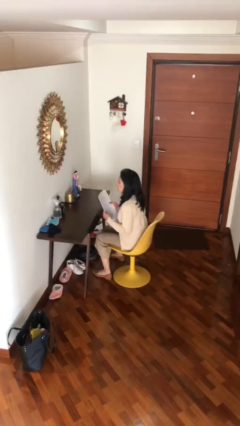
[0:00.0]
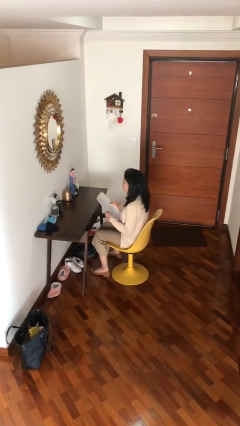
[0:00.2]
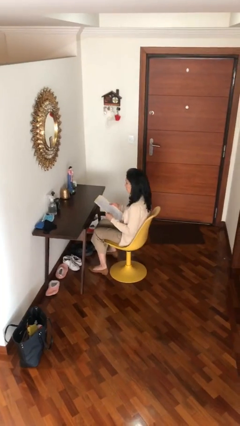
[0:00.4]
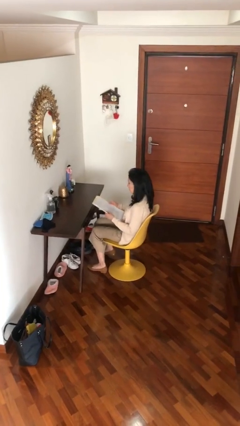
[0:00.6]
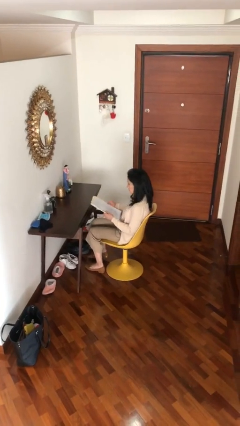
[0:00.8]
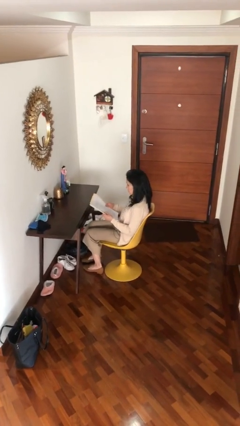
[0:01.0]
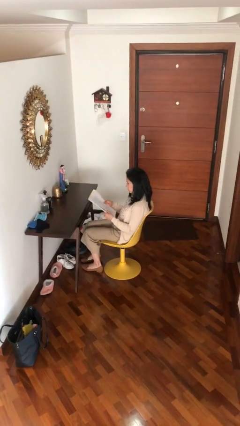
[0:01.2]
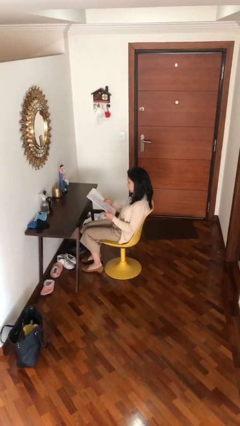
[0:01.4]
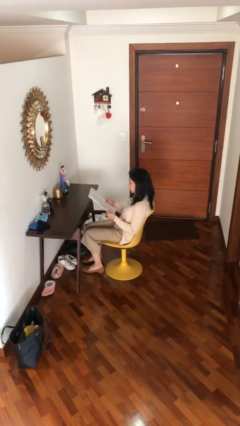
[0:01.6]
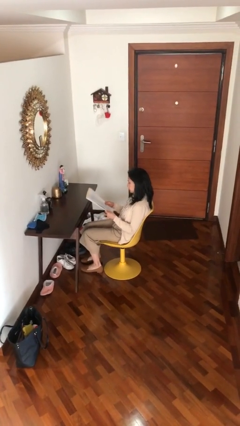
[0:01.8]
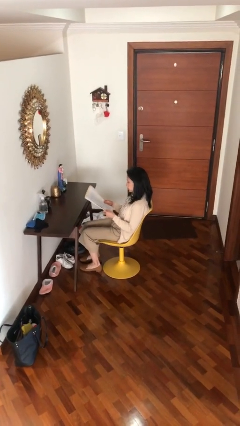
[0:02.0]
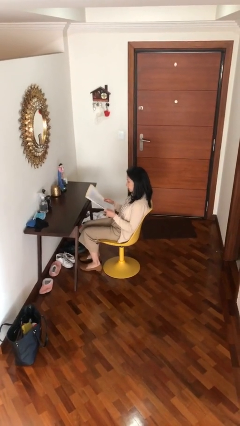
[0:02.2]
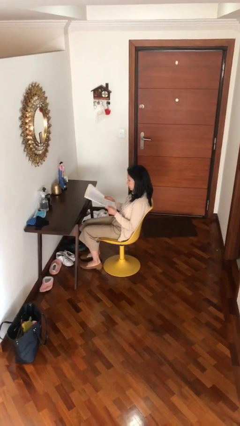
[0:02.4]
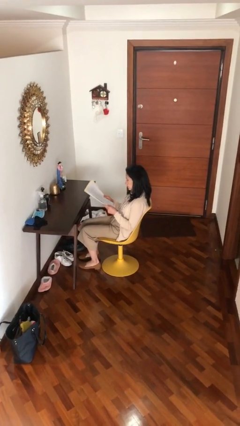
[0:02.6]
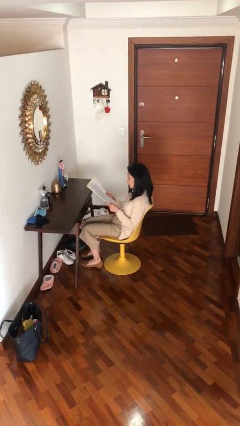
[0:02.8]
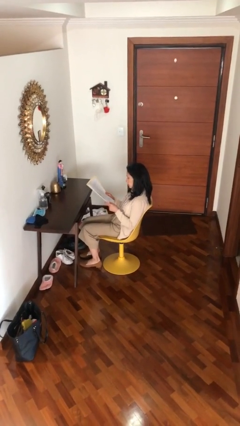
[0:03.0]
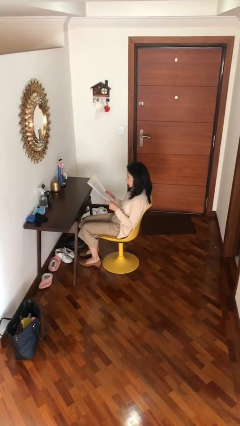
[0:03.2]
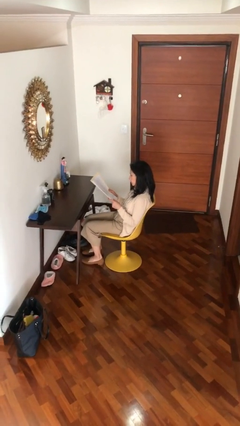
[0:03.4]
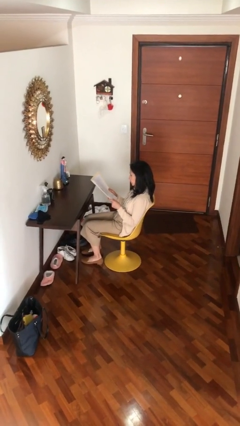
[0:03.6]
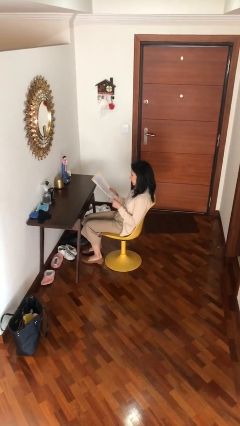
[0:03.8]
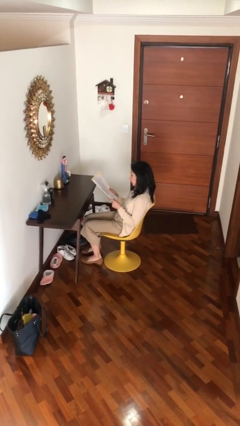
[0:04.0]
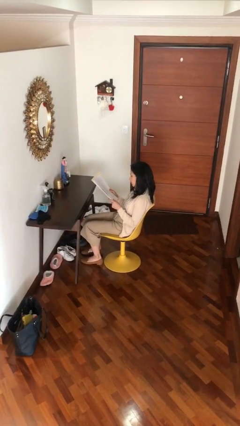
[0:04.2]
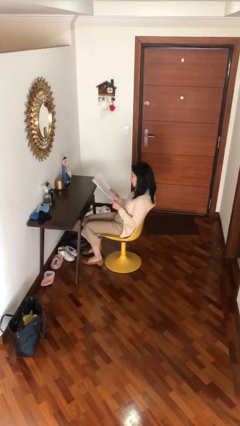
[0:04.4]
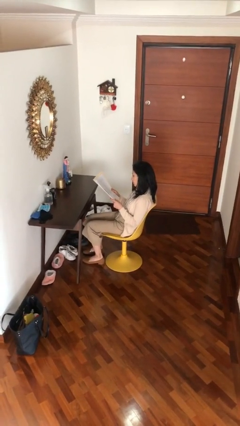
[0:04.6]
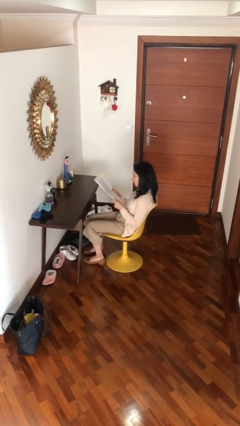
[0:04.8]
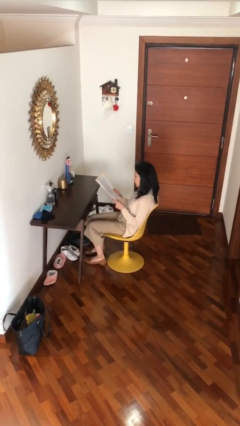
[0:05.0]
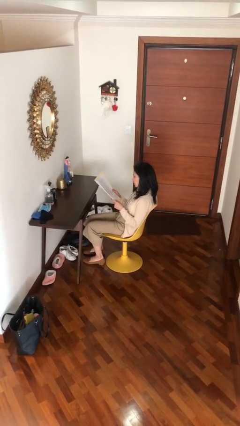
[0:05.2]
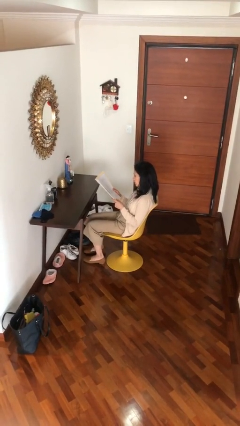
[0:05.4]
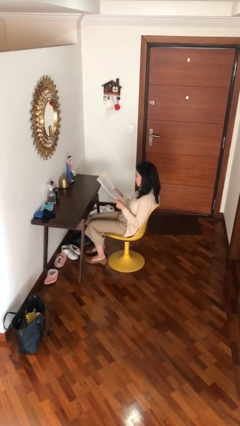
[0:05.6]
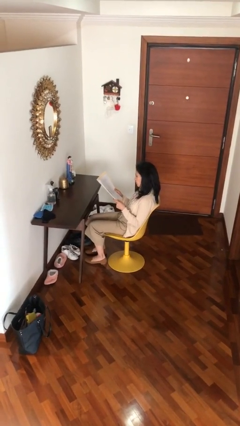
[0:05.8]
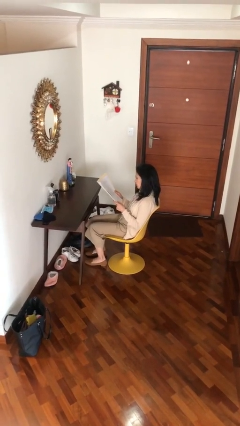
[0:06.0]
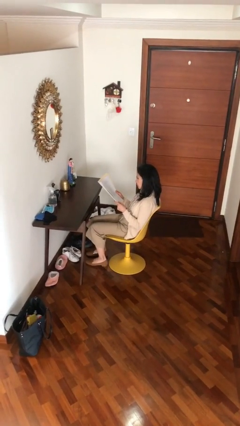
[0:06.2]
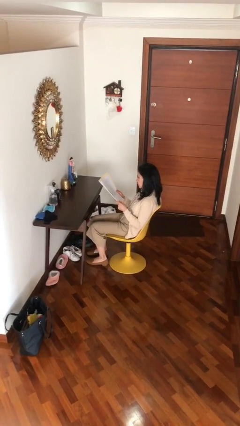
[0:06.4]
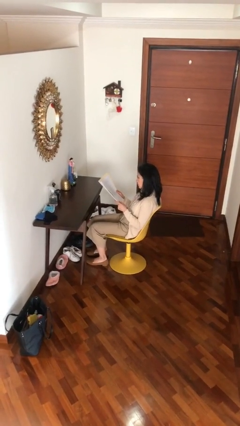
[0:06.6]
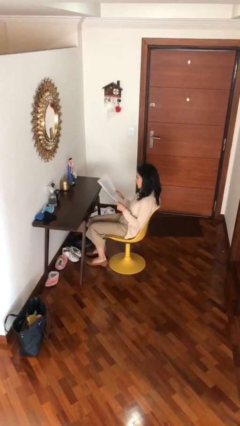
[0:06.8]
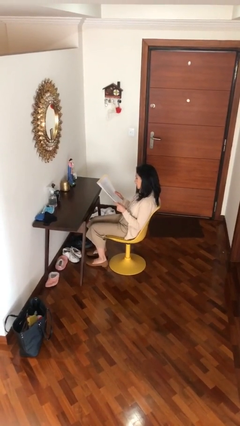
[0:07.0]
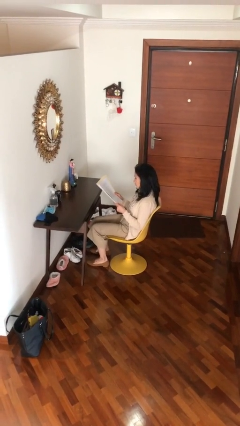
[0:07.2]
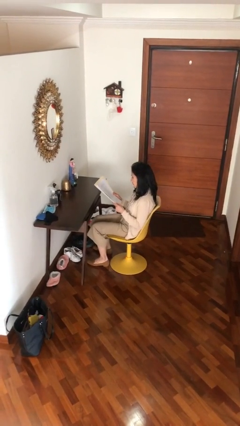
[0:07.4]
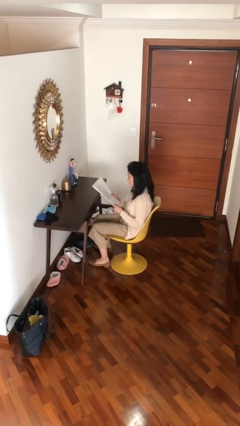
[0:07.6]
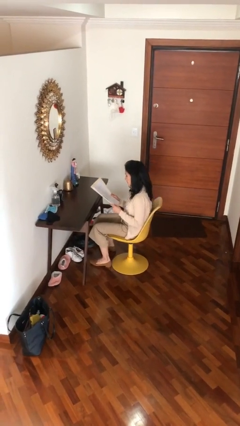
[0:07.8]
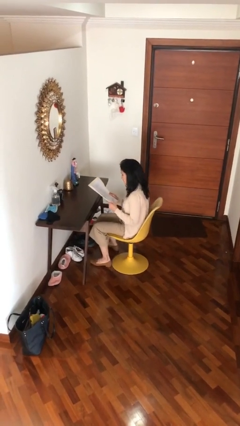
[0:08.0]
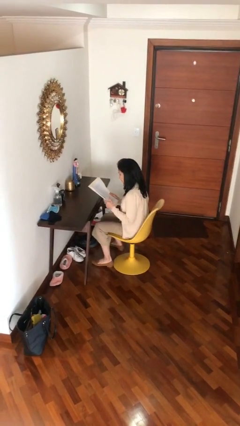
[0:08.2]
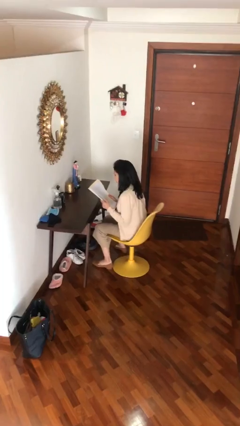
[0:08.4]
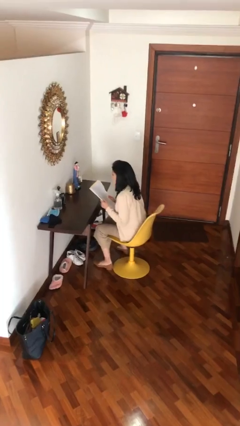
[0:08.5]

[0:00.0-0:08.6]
person reads document

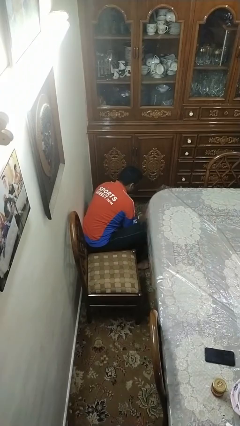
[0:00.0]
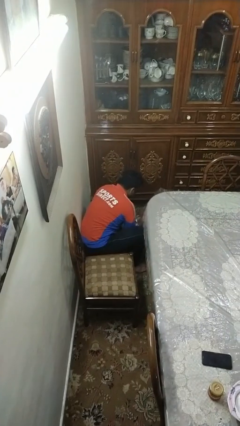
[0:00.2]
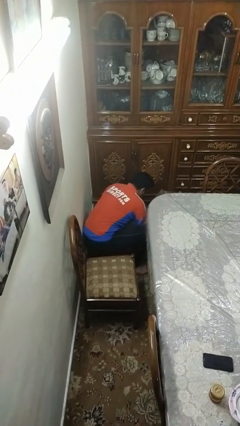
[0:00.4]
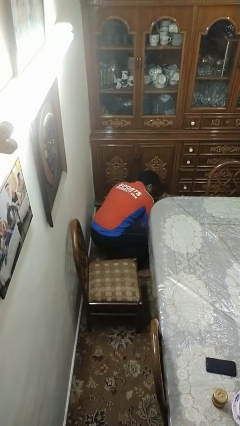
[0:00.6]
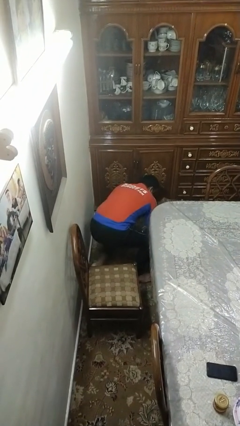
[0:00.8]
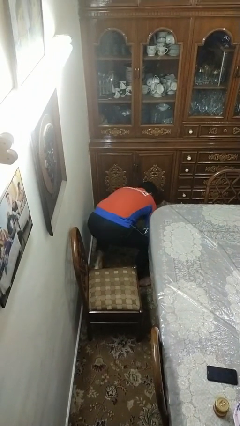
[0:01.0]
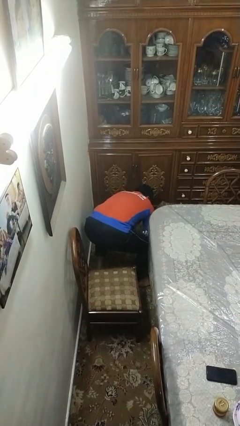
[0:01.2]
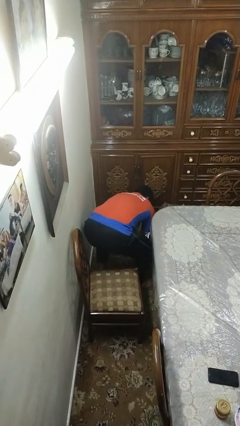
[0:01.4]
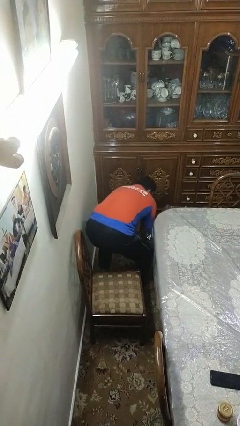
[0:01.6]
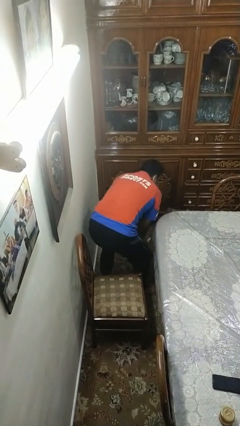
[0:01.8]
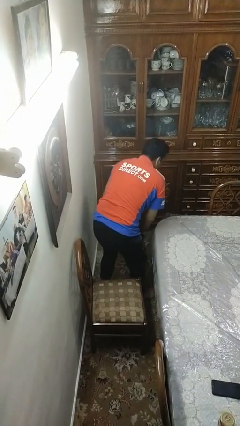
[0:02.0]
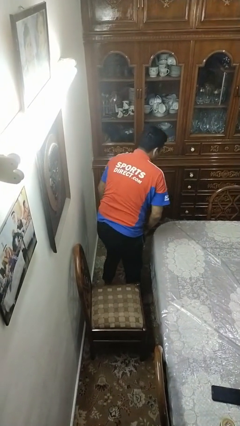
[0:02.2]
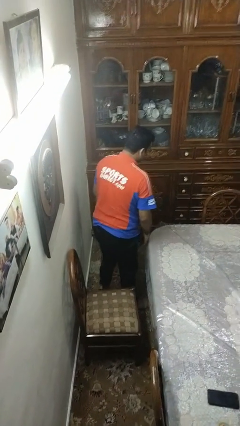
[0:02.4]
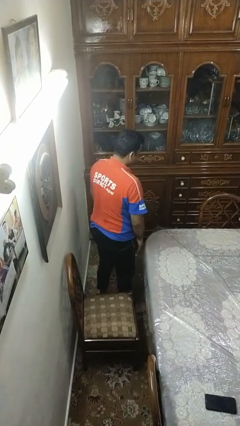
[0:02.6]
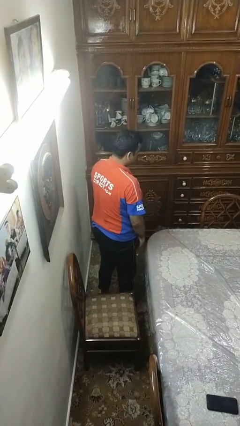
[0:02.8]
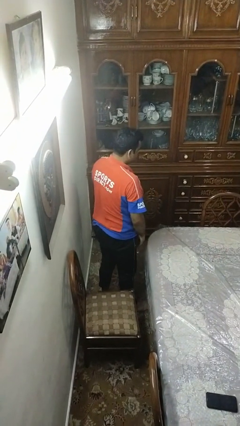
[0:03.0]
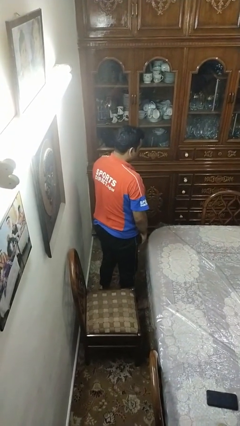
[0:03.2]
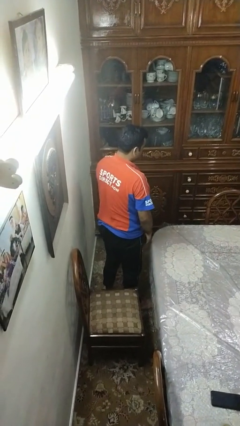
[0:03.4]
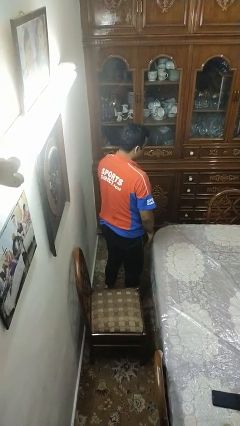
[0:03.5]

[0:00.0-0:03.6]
person stands up from floor

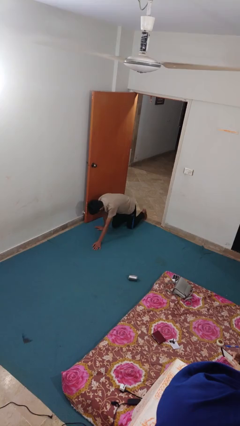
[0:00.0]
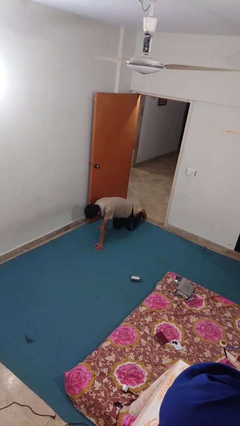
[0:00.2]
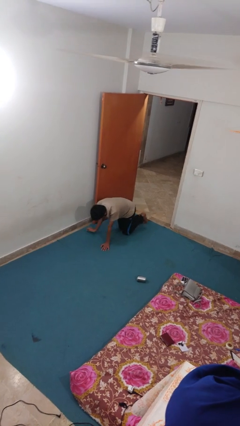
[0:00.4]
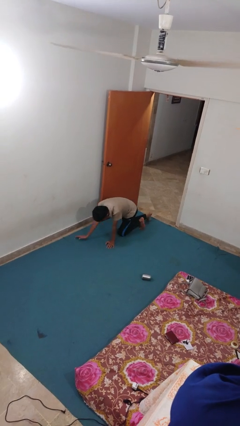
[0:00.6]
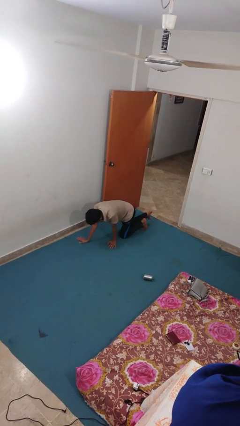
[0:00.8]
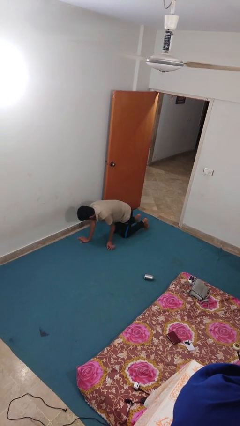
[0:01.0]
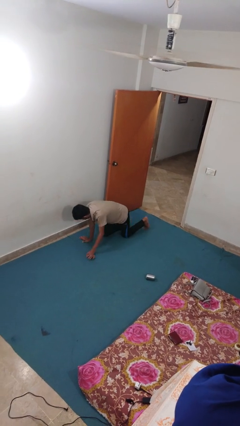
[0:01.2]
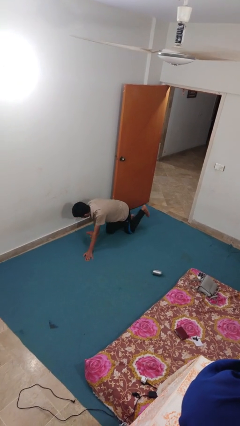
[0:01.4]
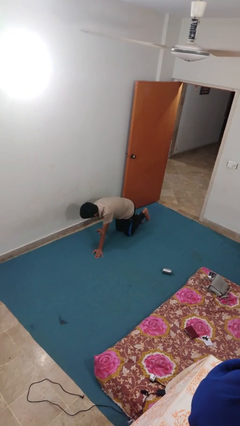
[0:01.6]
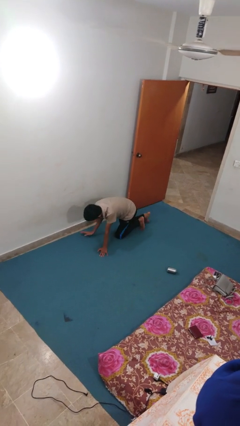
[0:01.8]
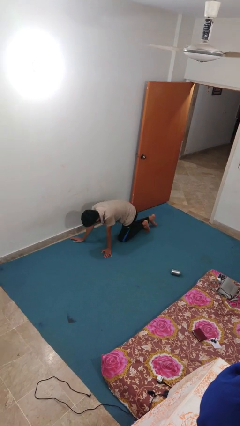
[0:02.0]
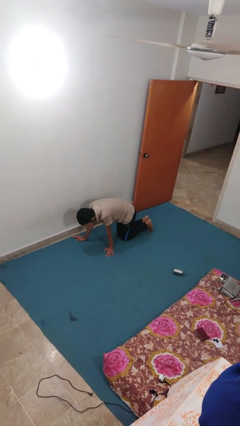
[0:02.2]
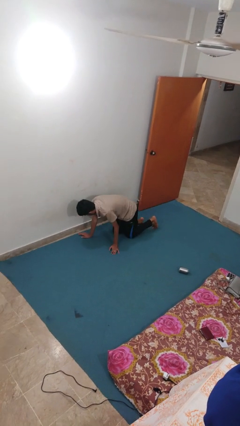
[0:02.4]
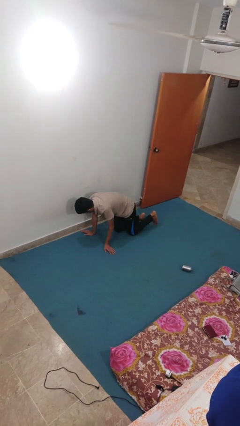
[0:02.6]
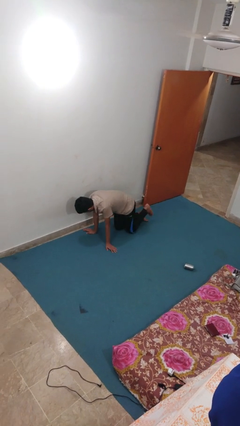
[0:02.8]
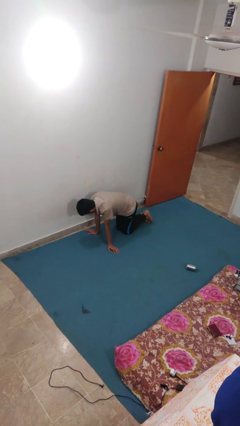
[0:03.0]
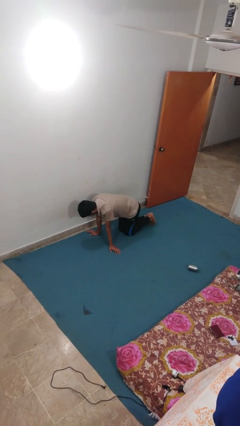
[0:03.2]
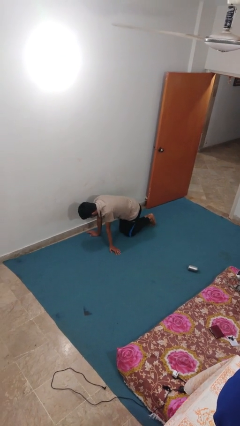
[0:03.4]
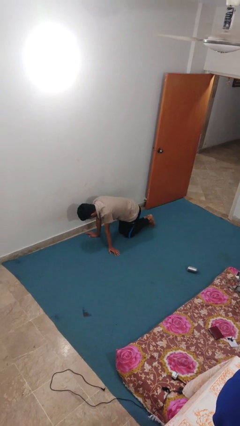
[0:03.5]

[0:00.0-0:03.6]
person crawls

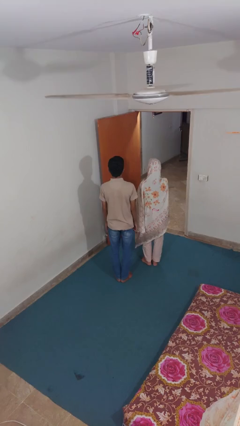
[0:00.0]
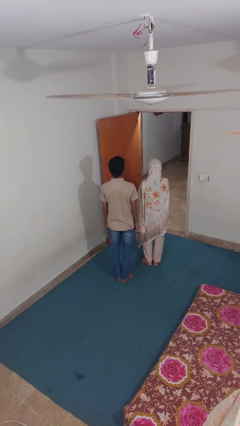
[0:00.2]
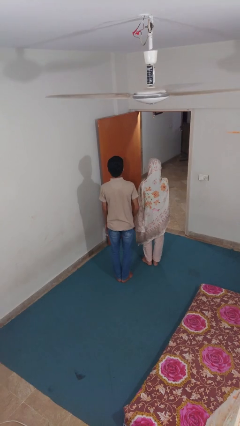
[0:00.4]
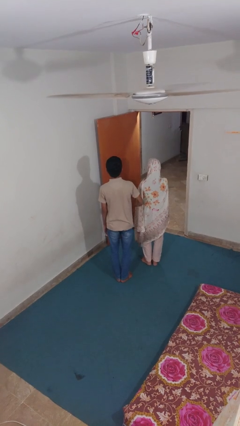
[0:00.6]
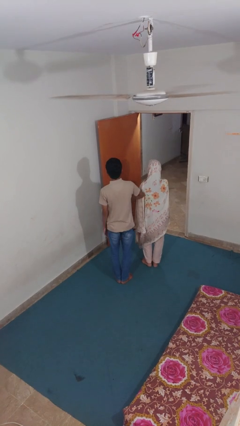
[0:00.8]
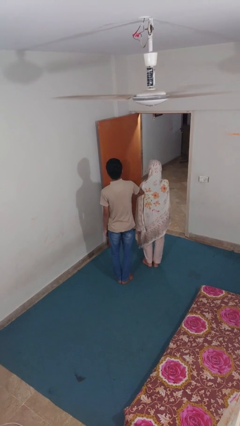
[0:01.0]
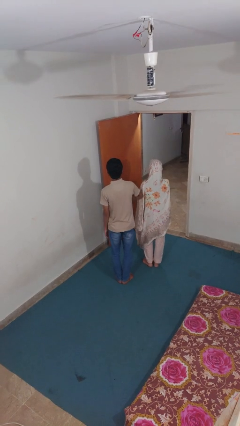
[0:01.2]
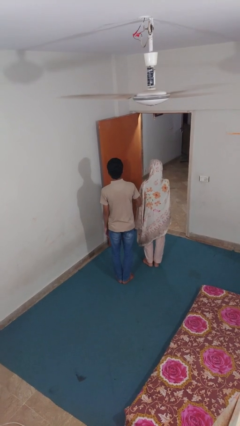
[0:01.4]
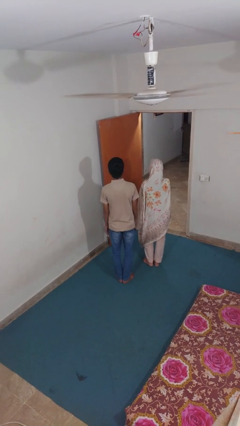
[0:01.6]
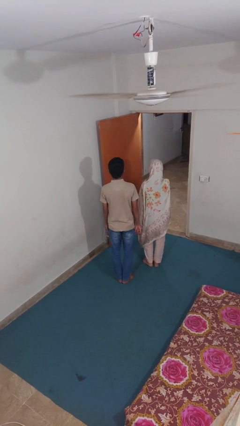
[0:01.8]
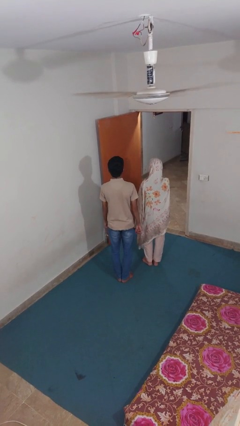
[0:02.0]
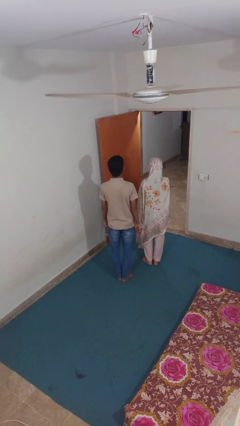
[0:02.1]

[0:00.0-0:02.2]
person nudges person with elbow
